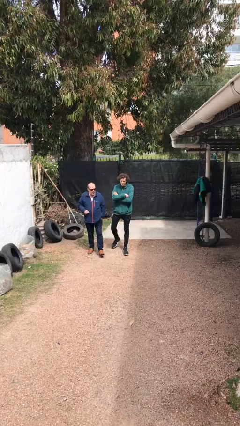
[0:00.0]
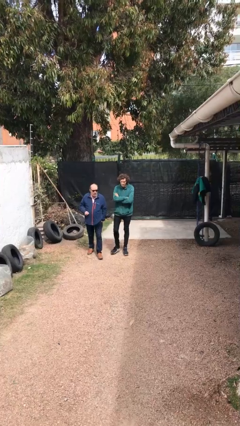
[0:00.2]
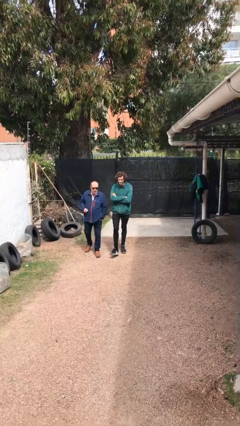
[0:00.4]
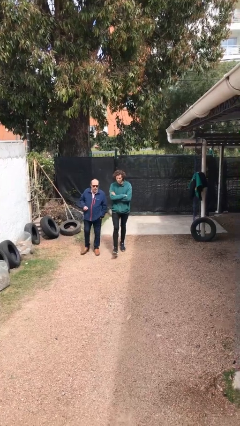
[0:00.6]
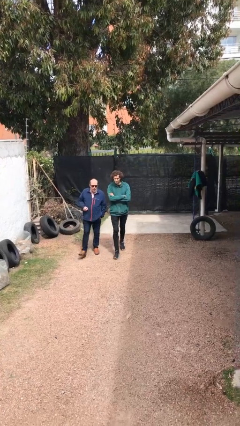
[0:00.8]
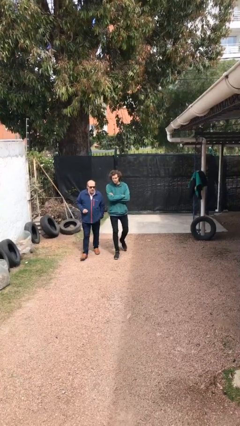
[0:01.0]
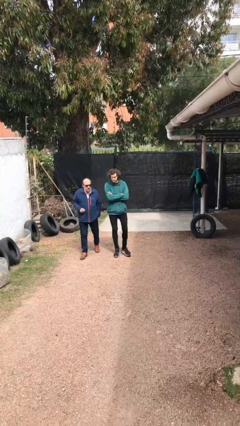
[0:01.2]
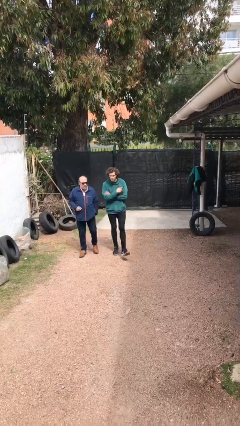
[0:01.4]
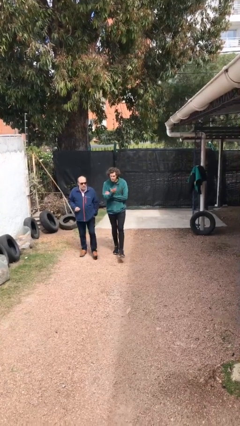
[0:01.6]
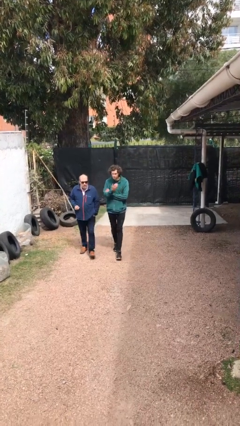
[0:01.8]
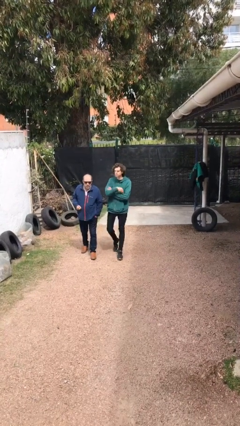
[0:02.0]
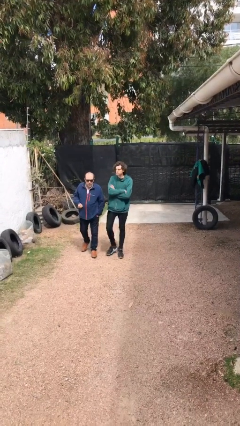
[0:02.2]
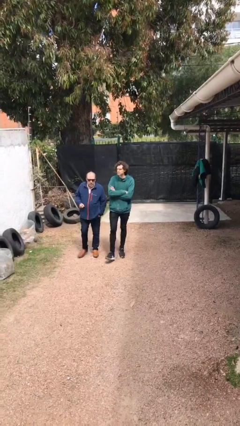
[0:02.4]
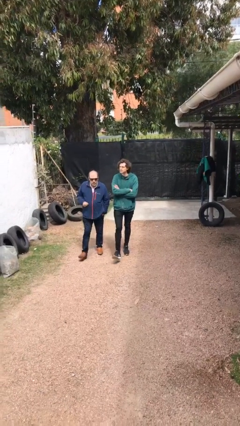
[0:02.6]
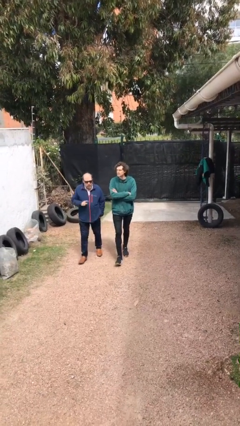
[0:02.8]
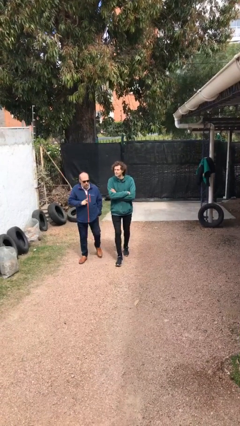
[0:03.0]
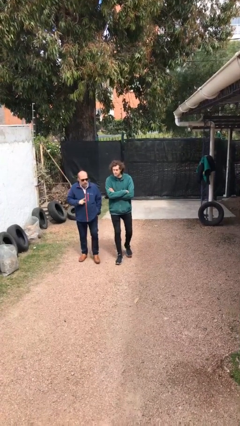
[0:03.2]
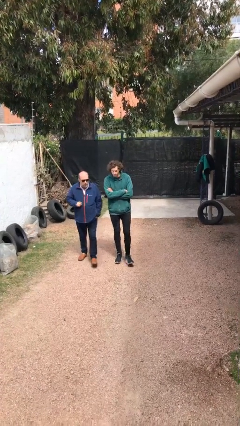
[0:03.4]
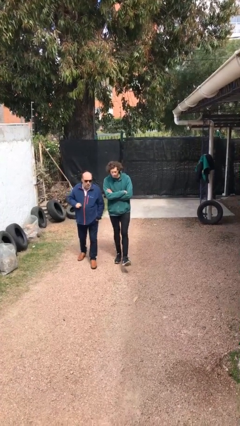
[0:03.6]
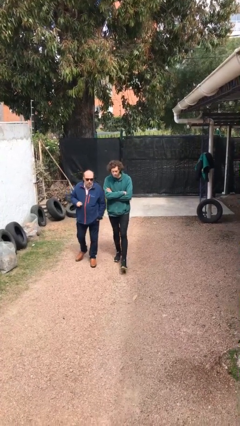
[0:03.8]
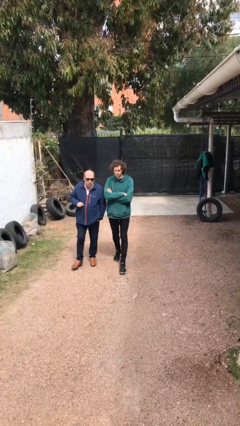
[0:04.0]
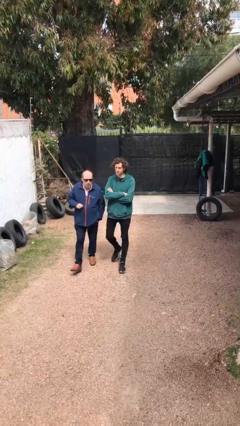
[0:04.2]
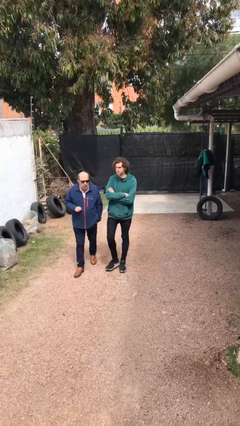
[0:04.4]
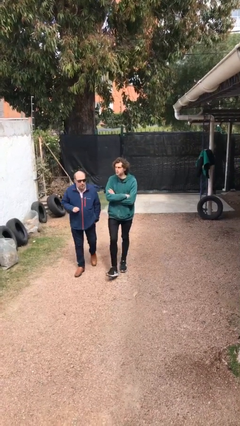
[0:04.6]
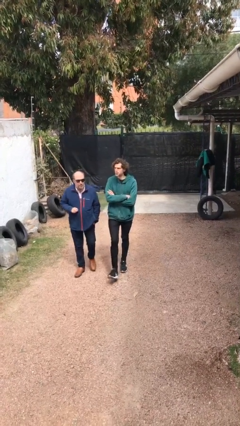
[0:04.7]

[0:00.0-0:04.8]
person talks to person

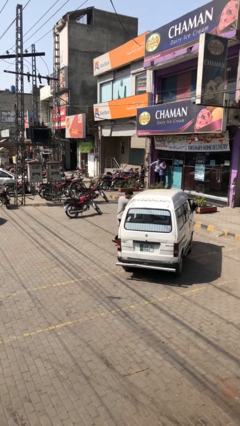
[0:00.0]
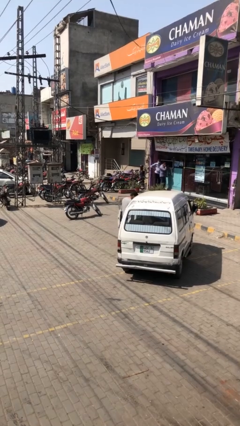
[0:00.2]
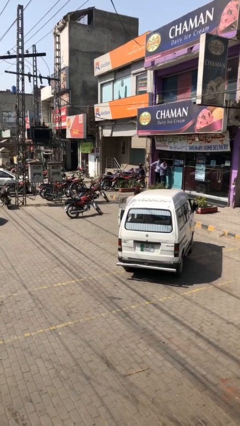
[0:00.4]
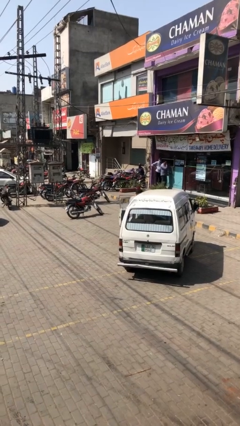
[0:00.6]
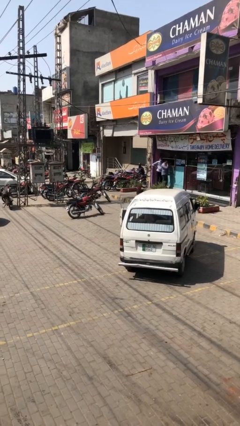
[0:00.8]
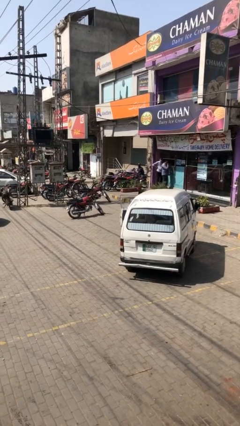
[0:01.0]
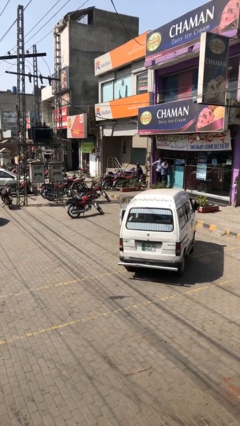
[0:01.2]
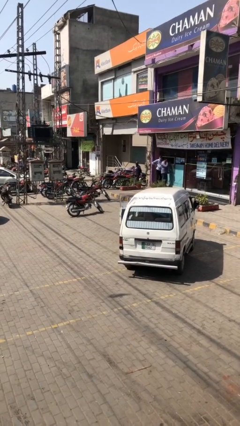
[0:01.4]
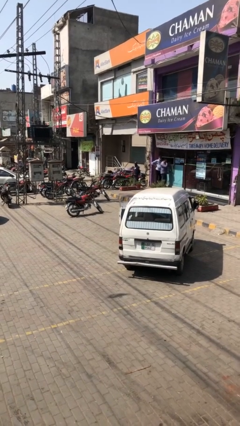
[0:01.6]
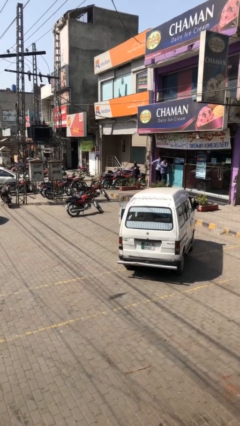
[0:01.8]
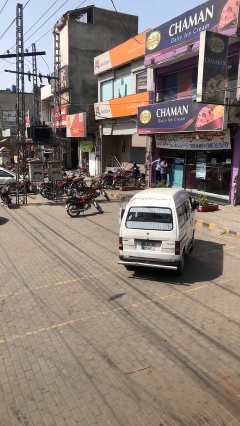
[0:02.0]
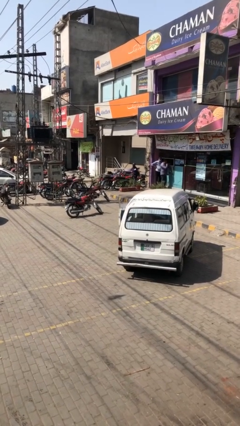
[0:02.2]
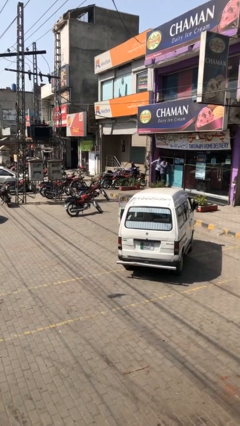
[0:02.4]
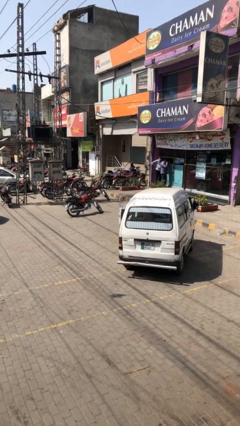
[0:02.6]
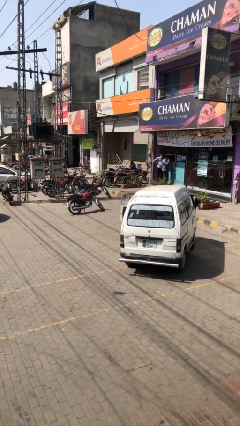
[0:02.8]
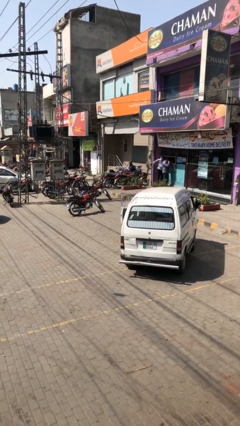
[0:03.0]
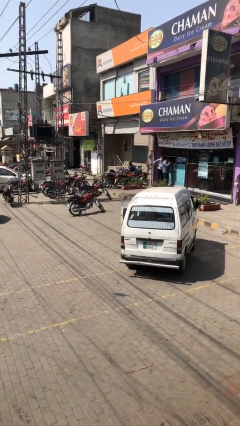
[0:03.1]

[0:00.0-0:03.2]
person enters car

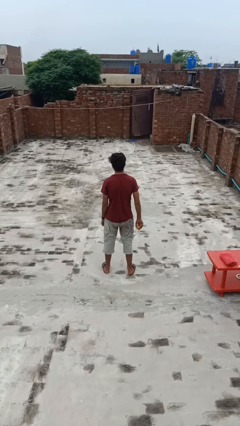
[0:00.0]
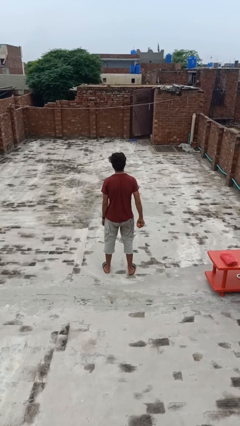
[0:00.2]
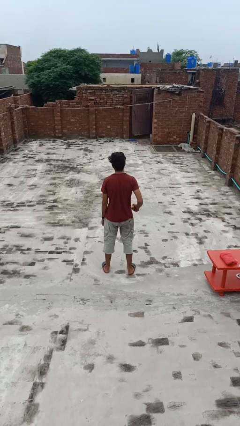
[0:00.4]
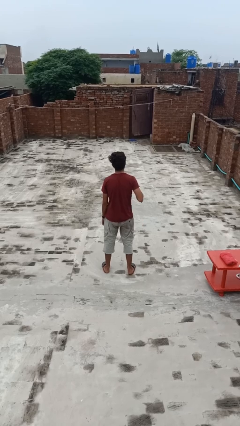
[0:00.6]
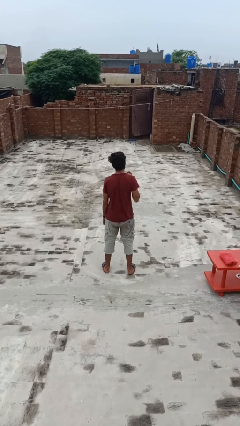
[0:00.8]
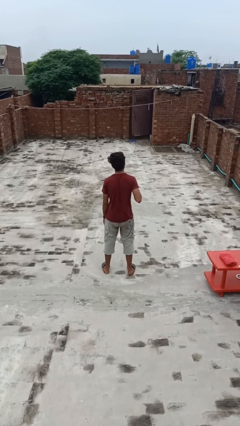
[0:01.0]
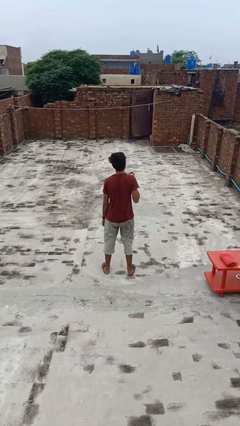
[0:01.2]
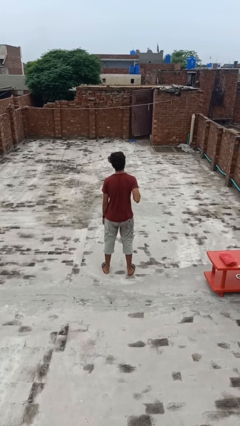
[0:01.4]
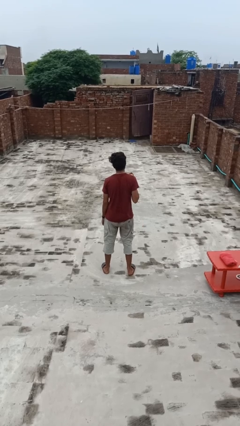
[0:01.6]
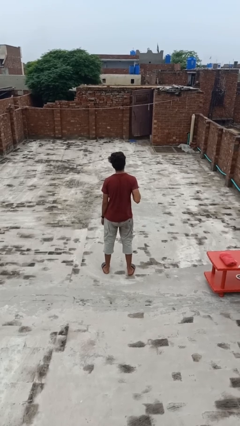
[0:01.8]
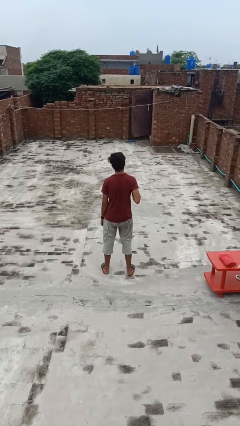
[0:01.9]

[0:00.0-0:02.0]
person rubs foot

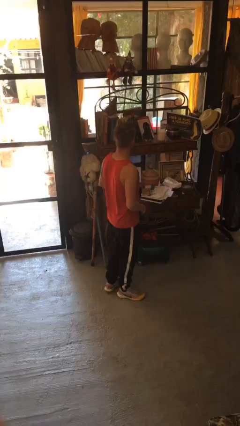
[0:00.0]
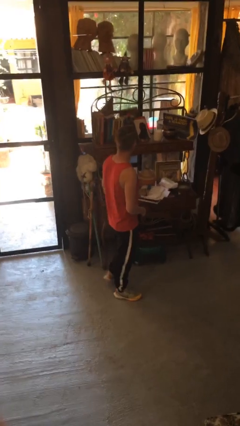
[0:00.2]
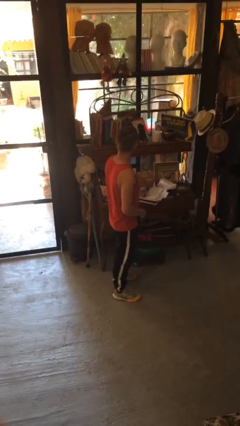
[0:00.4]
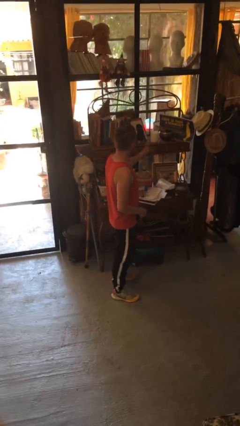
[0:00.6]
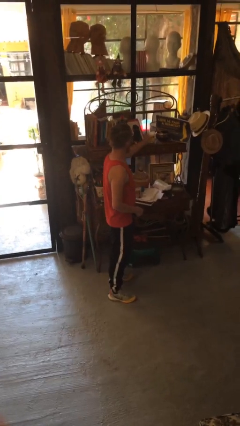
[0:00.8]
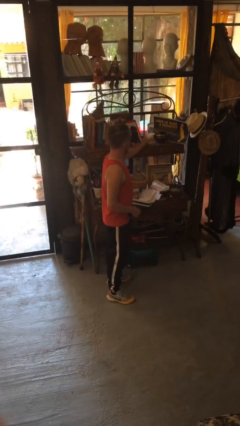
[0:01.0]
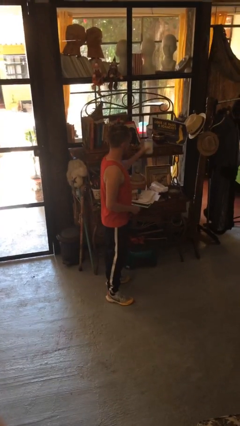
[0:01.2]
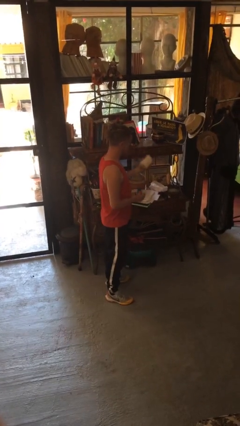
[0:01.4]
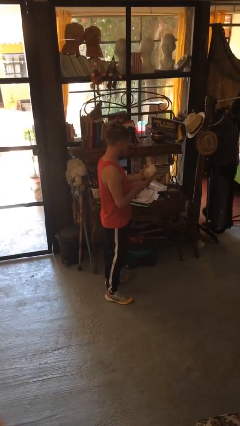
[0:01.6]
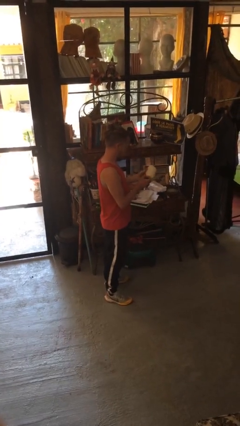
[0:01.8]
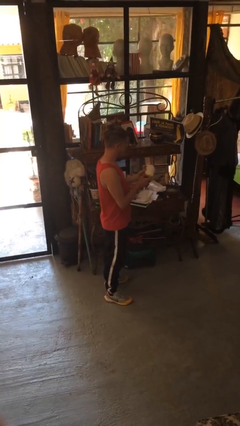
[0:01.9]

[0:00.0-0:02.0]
person picks up object from shelf

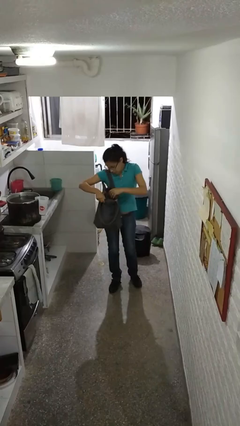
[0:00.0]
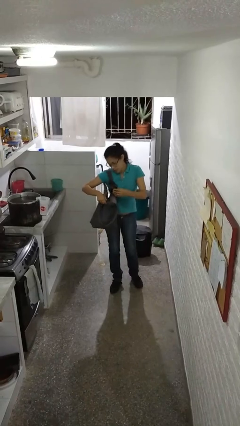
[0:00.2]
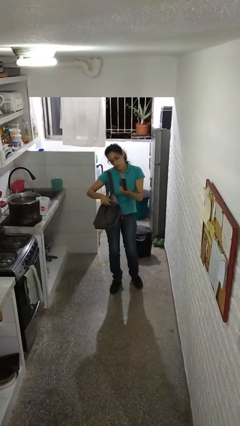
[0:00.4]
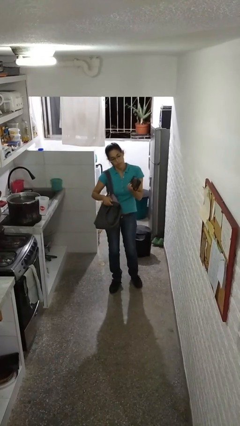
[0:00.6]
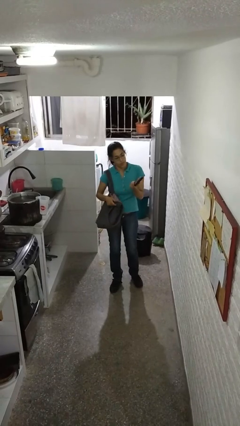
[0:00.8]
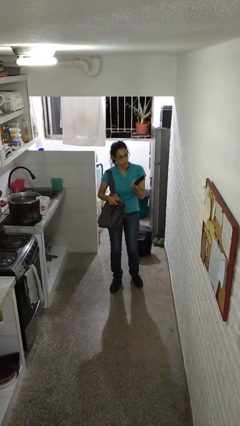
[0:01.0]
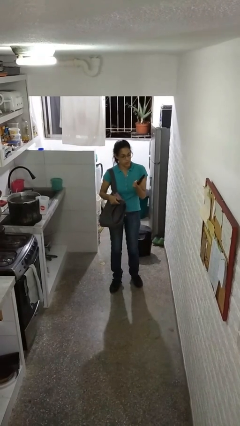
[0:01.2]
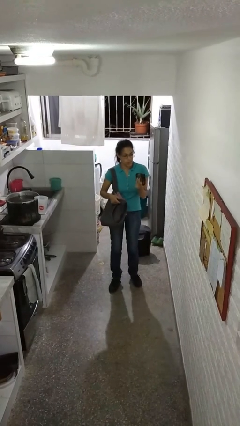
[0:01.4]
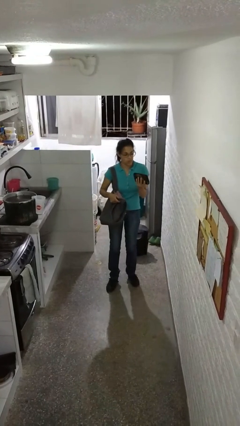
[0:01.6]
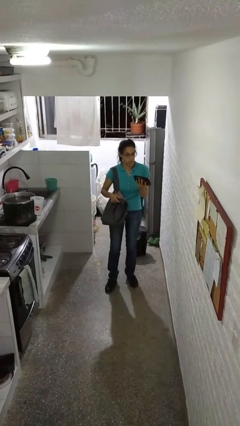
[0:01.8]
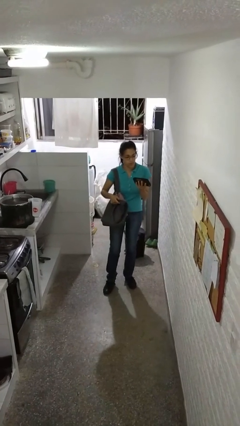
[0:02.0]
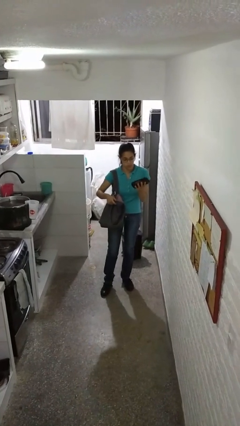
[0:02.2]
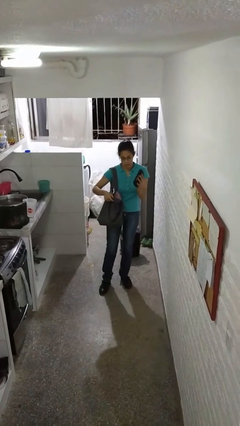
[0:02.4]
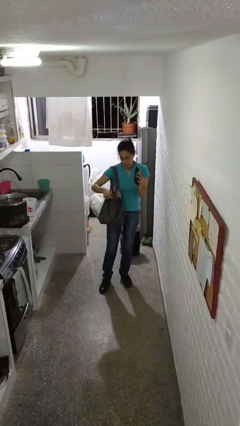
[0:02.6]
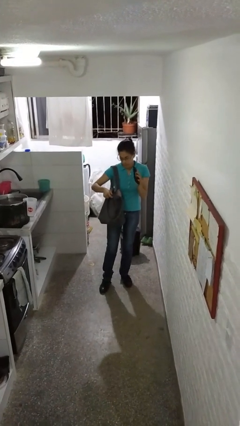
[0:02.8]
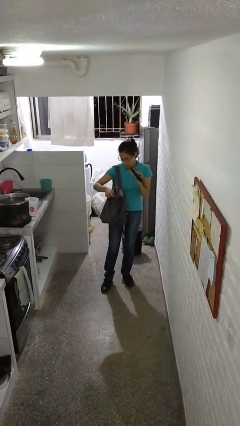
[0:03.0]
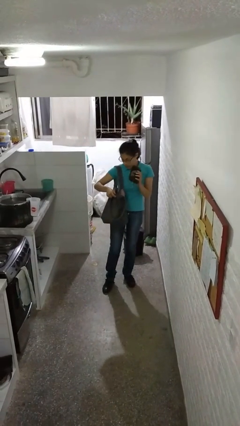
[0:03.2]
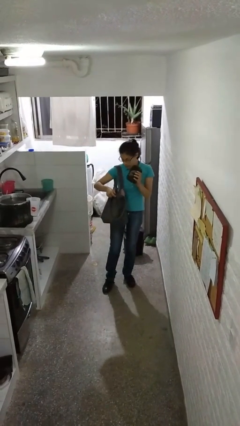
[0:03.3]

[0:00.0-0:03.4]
person takes object from purse

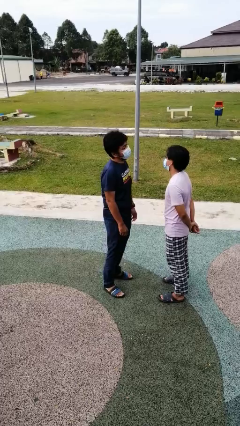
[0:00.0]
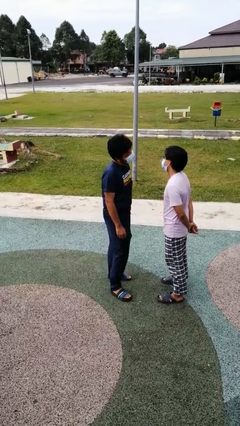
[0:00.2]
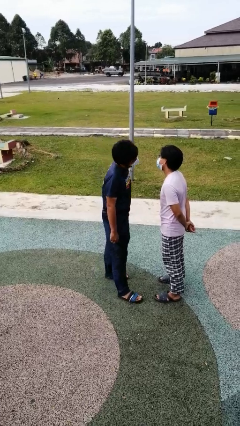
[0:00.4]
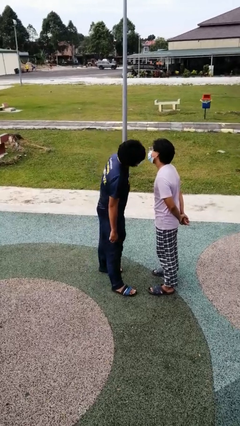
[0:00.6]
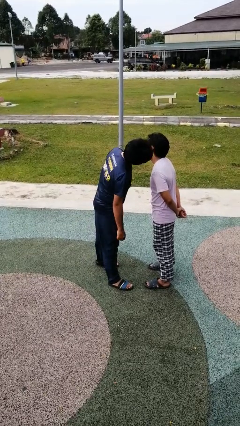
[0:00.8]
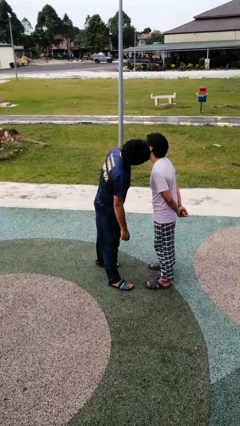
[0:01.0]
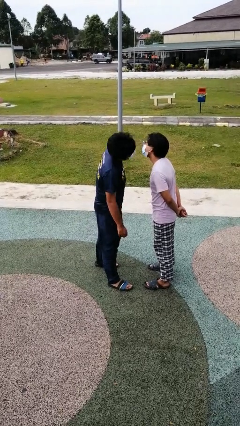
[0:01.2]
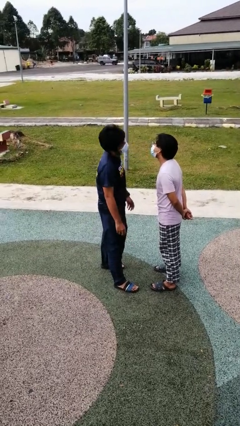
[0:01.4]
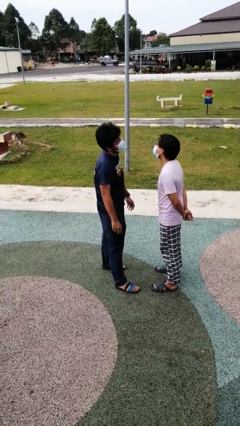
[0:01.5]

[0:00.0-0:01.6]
person kisses cheek of person

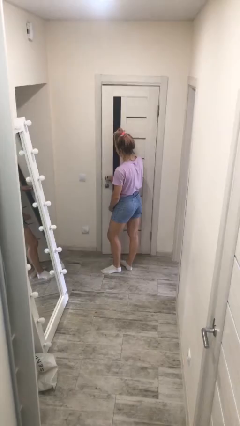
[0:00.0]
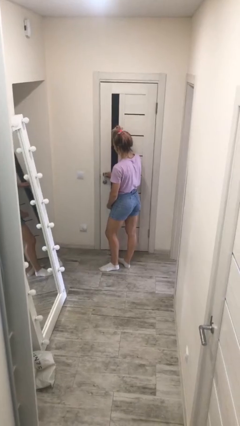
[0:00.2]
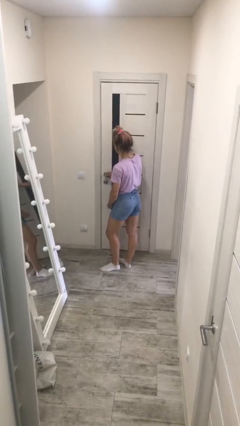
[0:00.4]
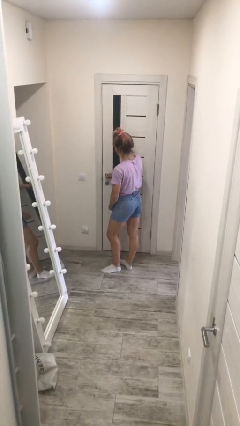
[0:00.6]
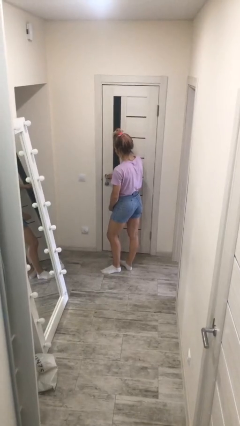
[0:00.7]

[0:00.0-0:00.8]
person closes facility door
